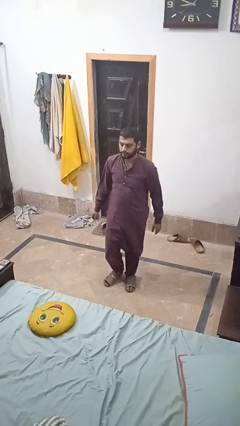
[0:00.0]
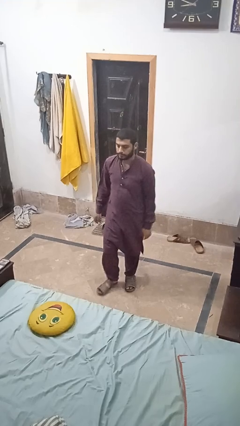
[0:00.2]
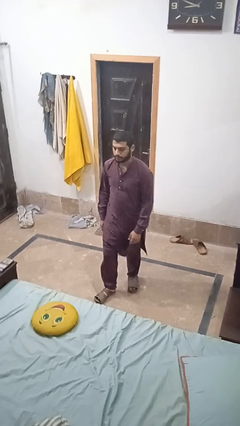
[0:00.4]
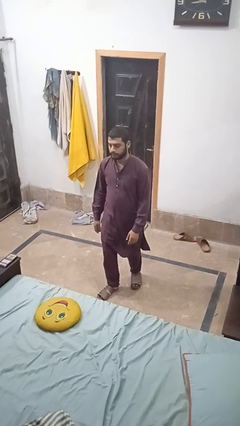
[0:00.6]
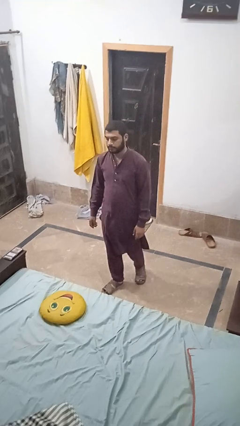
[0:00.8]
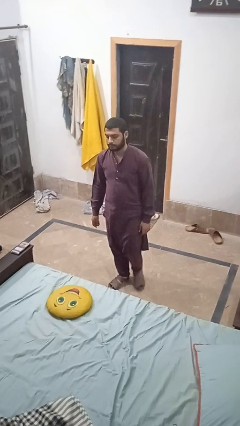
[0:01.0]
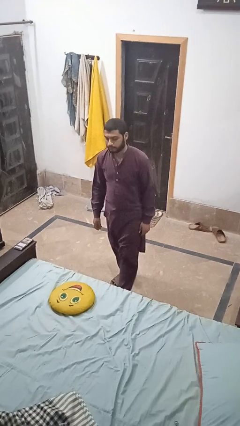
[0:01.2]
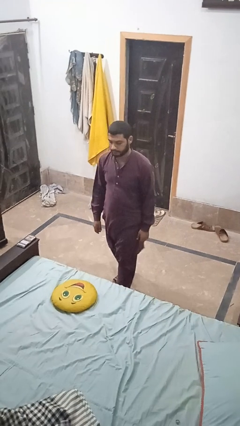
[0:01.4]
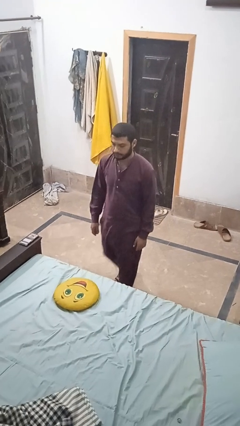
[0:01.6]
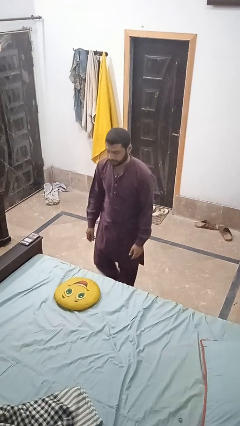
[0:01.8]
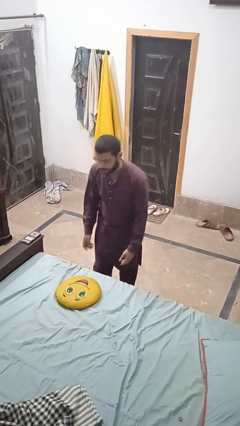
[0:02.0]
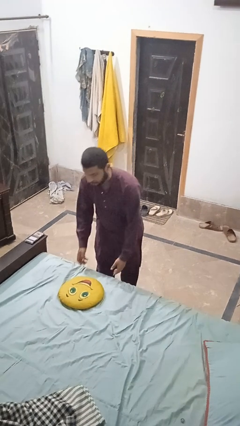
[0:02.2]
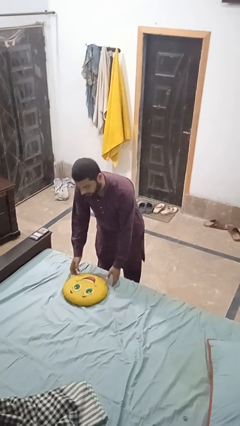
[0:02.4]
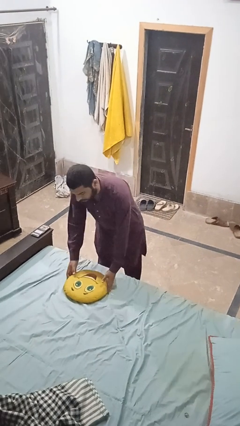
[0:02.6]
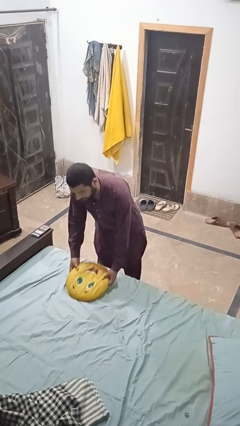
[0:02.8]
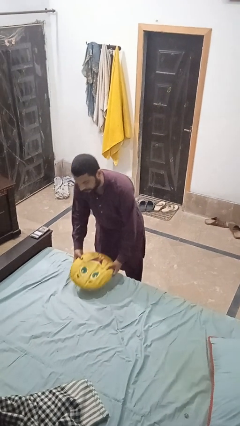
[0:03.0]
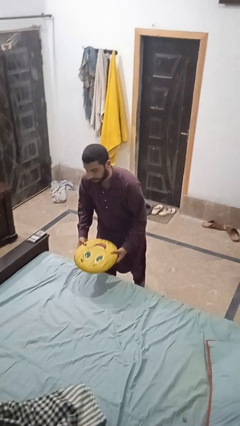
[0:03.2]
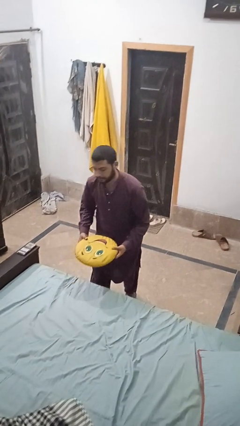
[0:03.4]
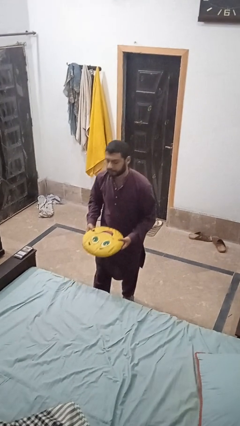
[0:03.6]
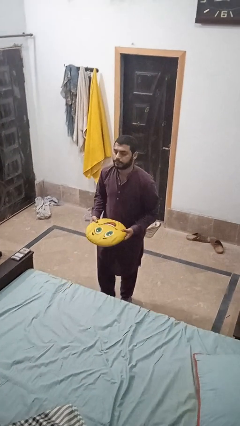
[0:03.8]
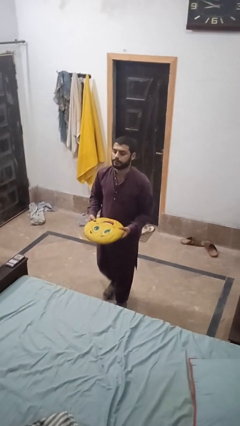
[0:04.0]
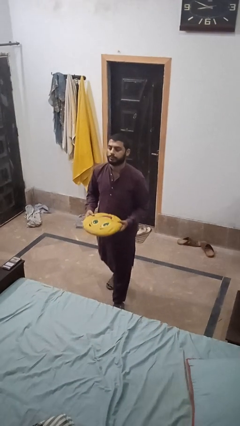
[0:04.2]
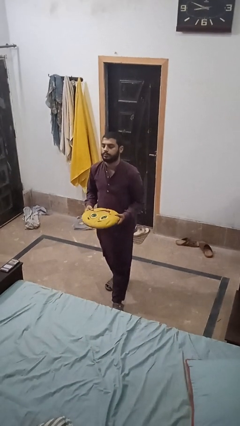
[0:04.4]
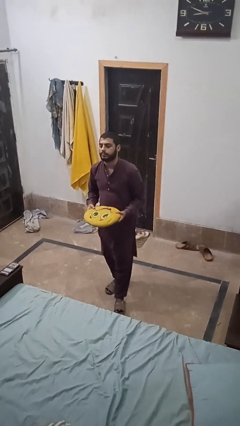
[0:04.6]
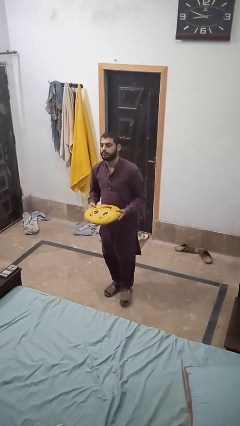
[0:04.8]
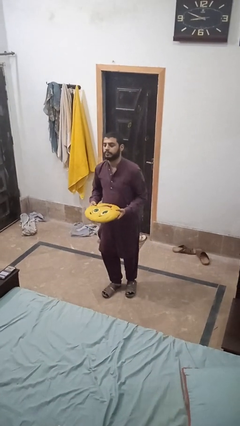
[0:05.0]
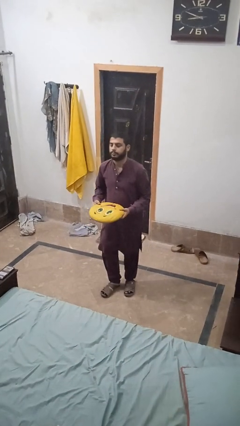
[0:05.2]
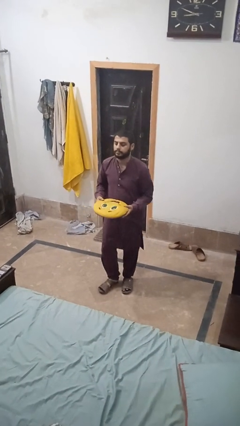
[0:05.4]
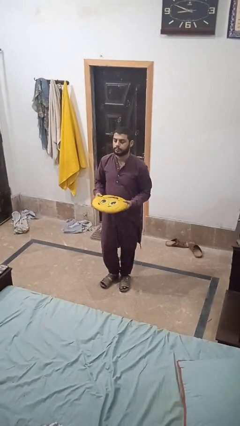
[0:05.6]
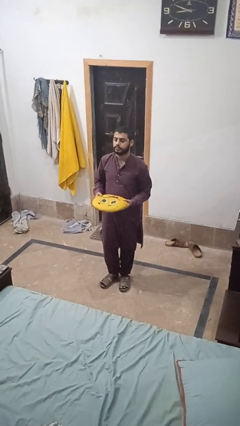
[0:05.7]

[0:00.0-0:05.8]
person picks up object from bed

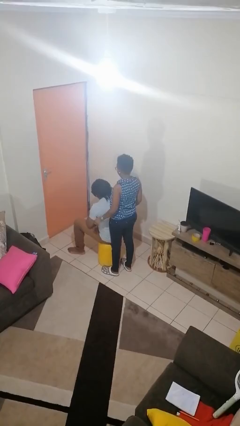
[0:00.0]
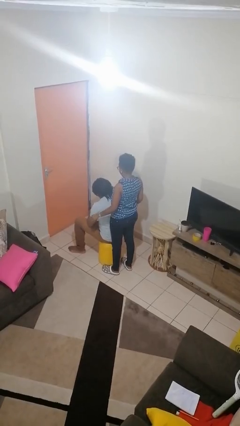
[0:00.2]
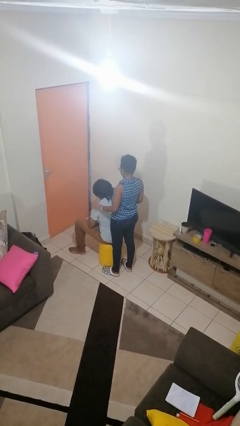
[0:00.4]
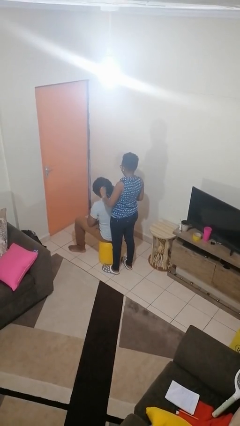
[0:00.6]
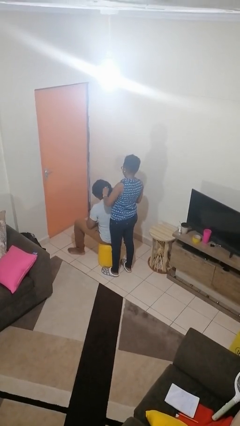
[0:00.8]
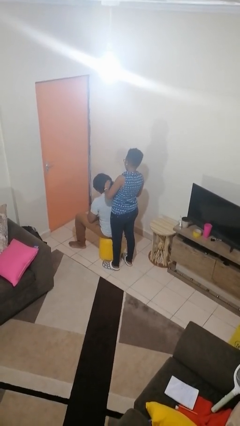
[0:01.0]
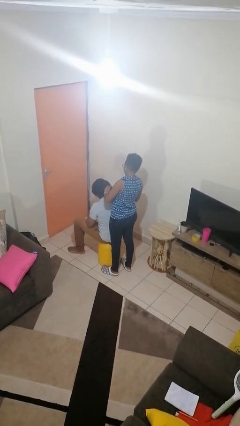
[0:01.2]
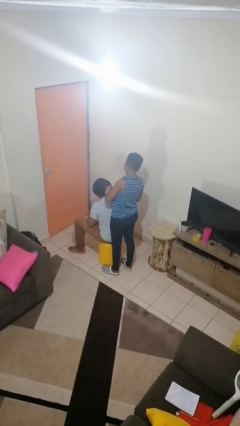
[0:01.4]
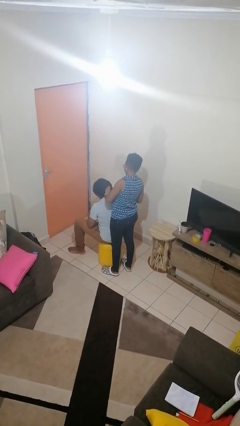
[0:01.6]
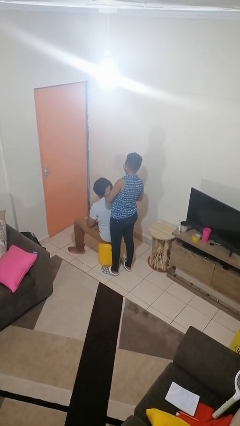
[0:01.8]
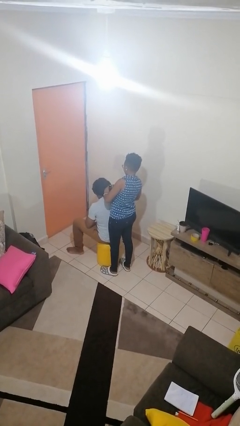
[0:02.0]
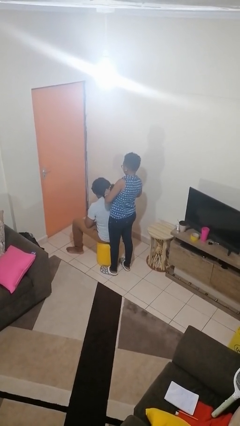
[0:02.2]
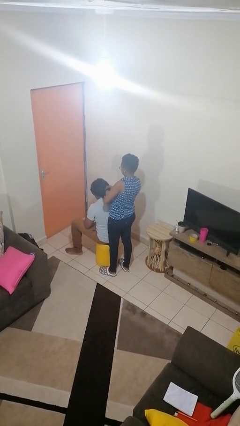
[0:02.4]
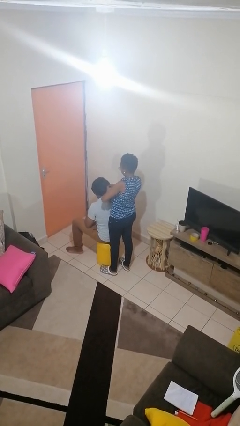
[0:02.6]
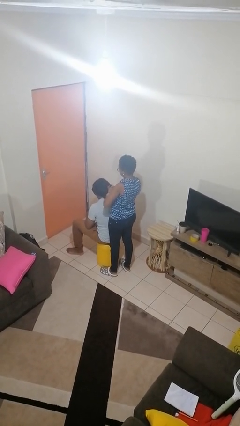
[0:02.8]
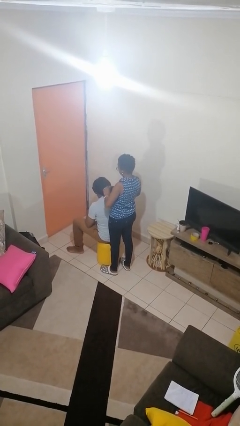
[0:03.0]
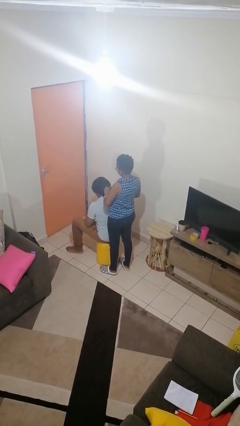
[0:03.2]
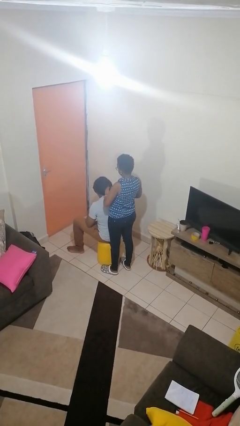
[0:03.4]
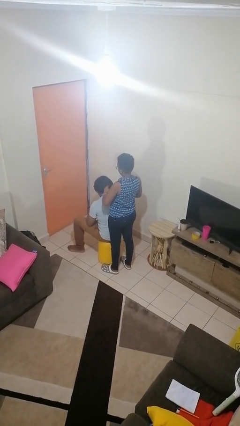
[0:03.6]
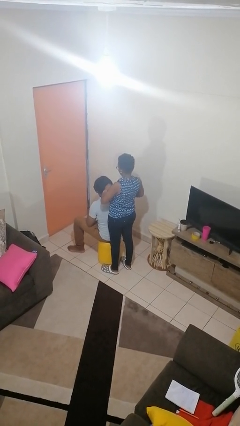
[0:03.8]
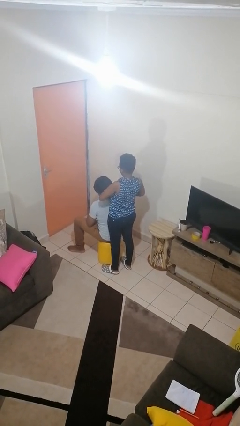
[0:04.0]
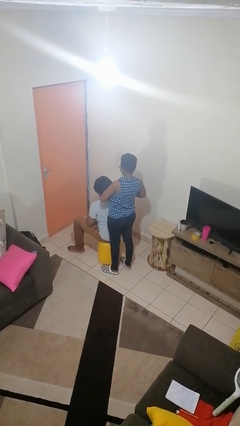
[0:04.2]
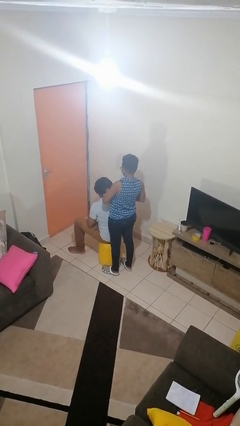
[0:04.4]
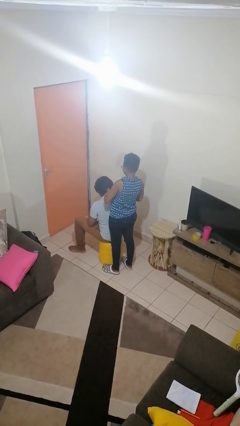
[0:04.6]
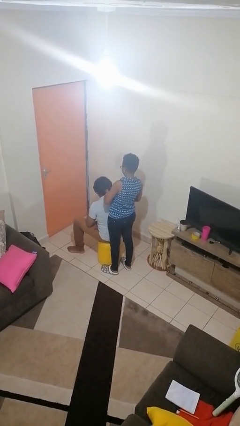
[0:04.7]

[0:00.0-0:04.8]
person braids hair of person

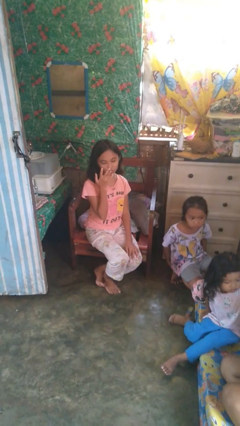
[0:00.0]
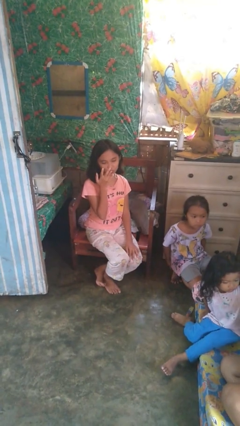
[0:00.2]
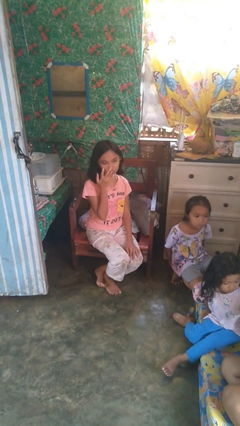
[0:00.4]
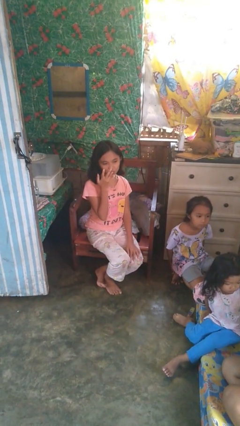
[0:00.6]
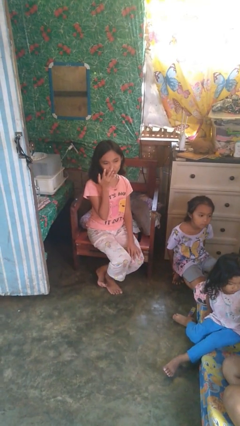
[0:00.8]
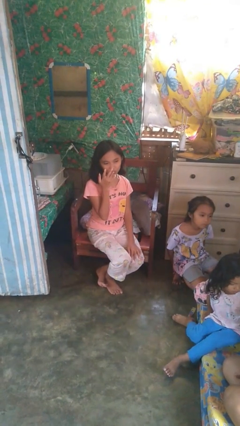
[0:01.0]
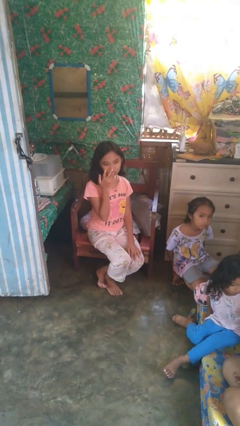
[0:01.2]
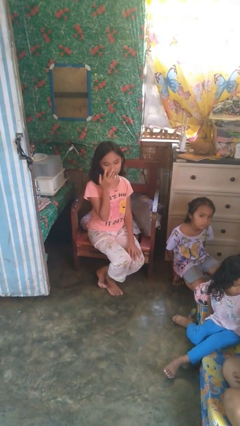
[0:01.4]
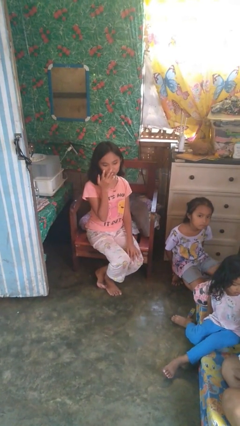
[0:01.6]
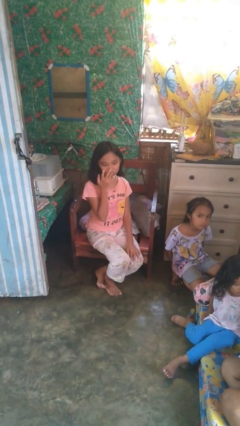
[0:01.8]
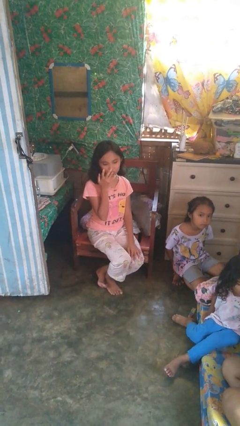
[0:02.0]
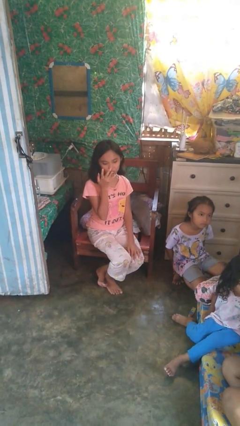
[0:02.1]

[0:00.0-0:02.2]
person licks fingers

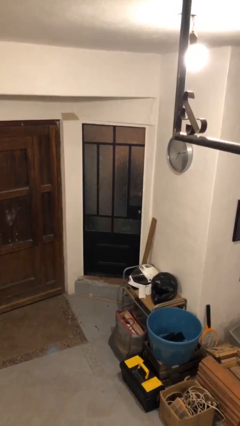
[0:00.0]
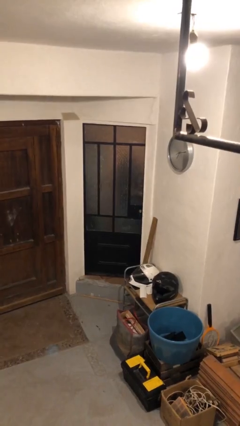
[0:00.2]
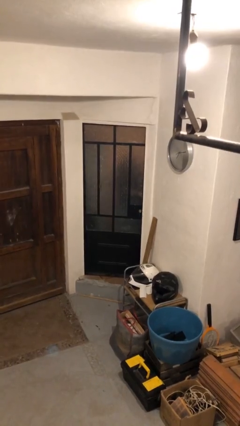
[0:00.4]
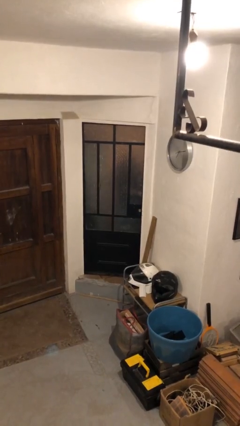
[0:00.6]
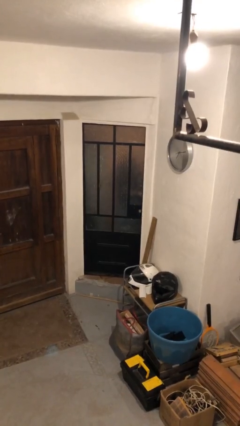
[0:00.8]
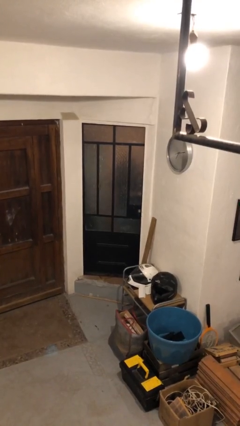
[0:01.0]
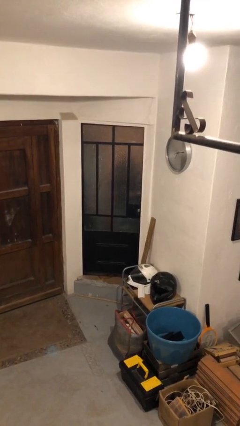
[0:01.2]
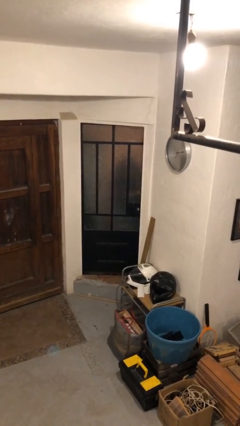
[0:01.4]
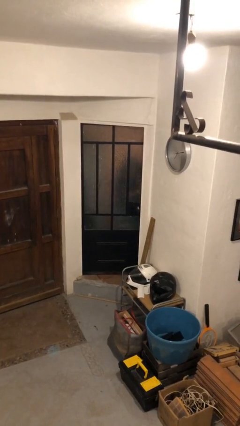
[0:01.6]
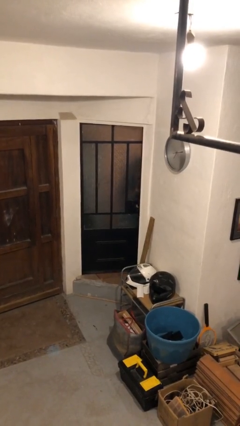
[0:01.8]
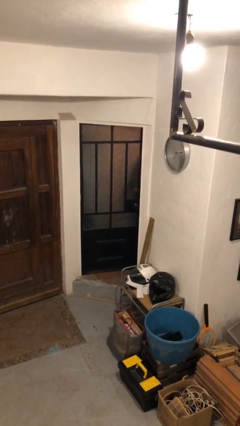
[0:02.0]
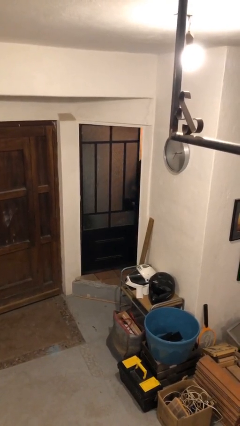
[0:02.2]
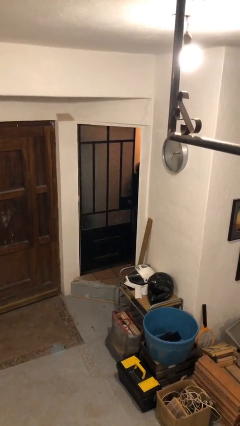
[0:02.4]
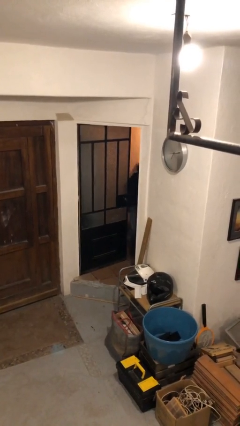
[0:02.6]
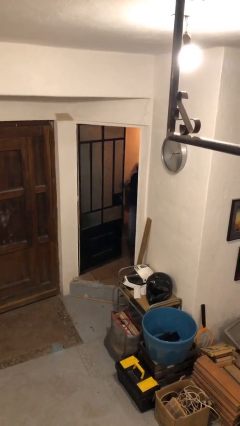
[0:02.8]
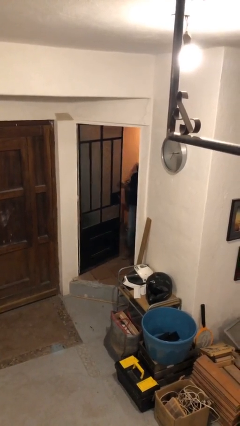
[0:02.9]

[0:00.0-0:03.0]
person opens facility door

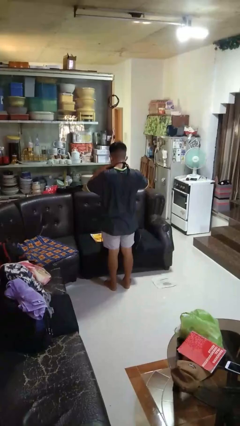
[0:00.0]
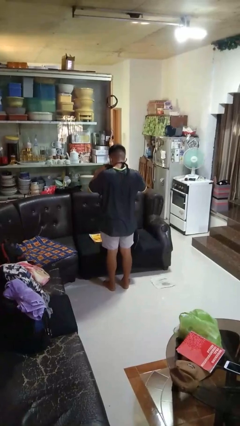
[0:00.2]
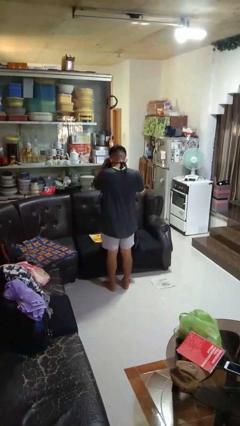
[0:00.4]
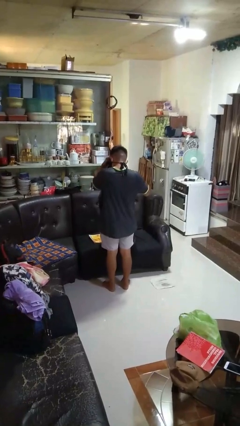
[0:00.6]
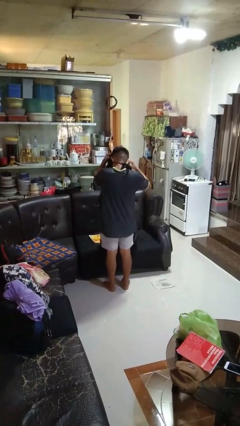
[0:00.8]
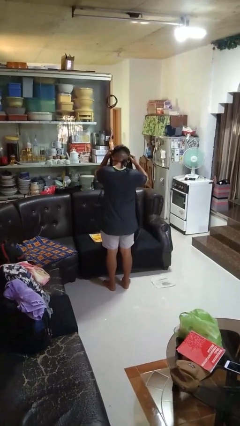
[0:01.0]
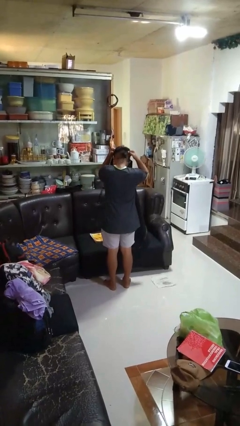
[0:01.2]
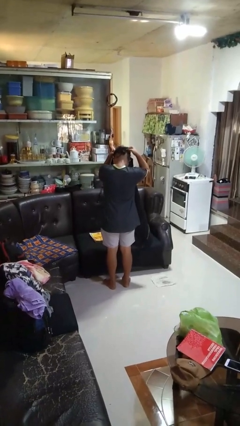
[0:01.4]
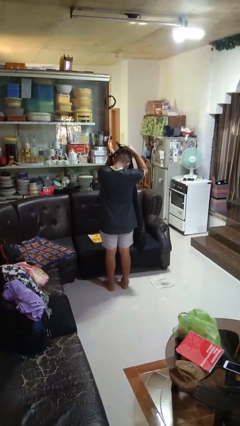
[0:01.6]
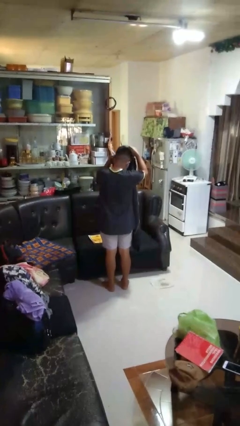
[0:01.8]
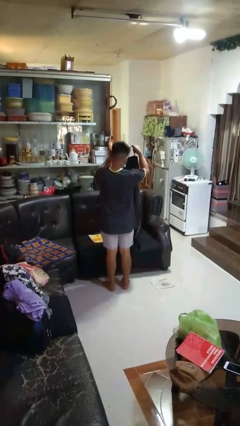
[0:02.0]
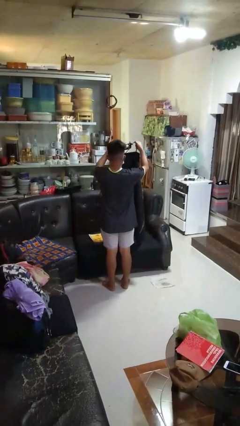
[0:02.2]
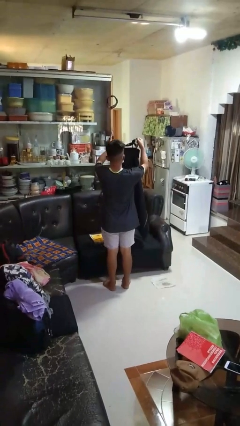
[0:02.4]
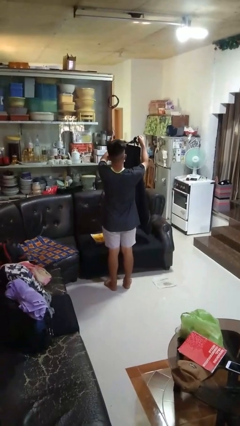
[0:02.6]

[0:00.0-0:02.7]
person takes off apron
